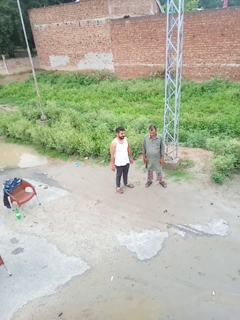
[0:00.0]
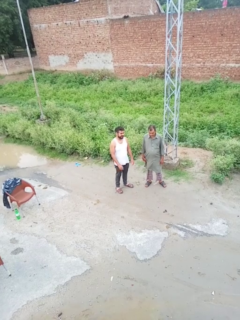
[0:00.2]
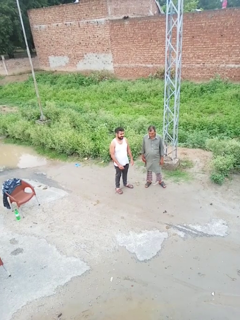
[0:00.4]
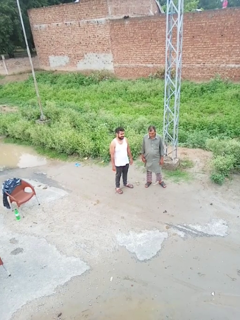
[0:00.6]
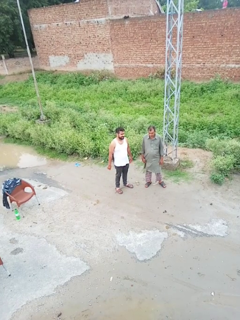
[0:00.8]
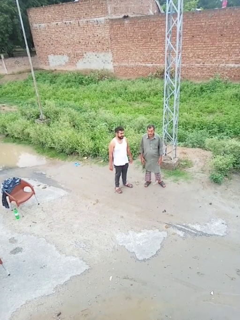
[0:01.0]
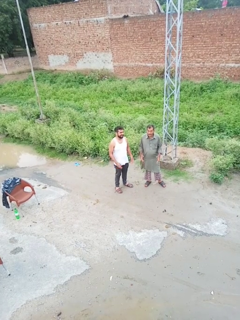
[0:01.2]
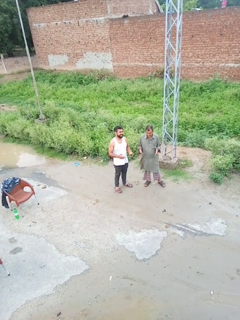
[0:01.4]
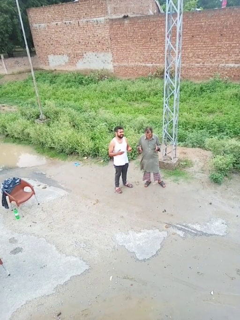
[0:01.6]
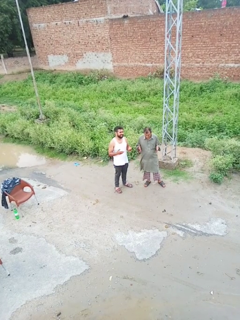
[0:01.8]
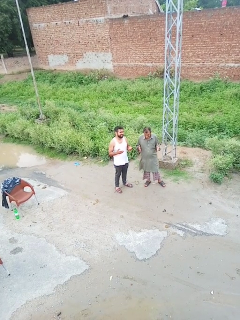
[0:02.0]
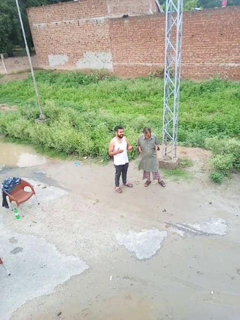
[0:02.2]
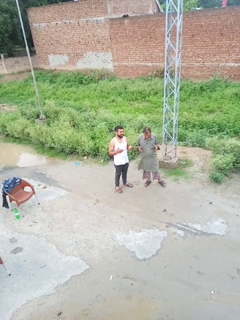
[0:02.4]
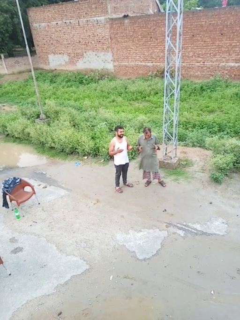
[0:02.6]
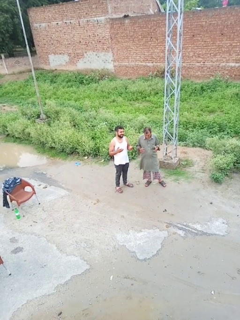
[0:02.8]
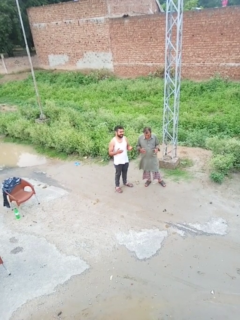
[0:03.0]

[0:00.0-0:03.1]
person laughs with person

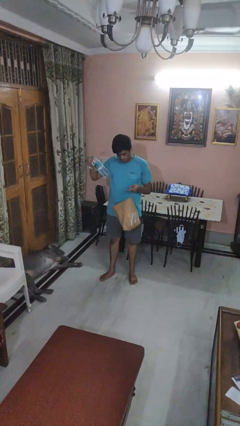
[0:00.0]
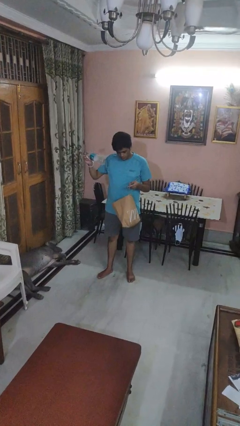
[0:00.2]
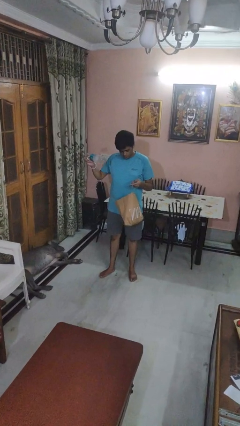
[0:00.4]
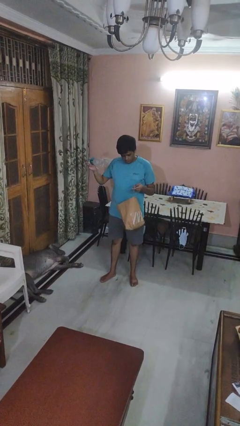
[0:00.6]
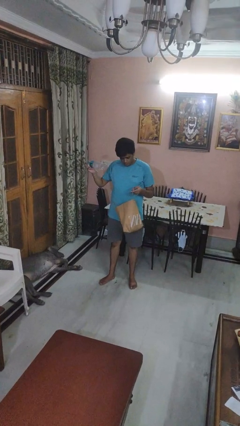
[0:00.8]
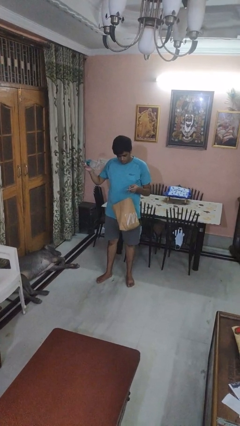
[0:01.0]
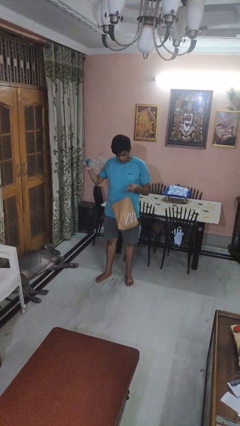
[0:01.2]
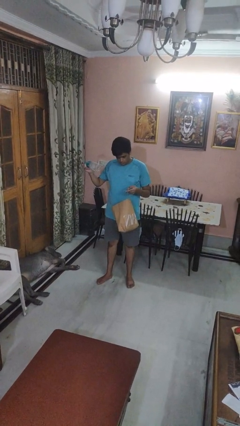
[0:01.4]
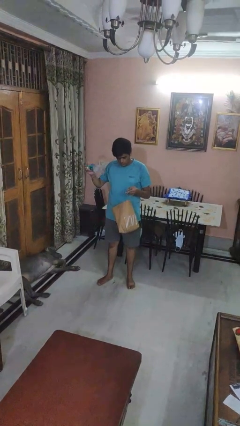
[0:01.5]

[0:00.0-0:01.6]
person takes object from bag

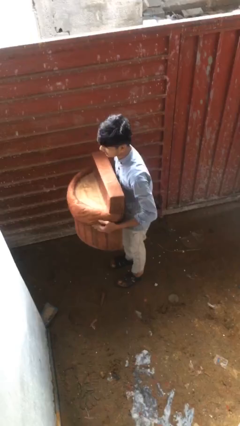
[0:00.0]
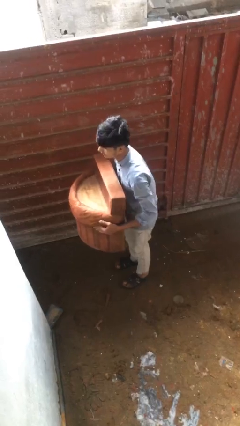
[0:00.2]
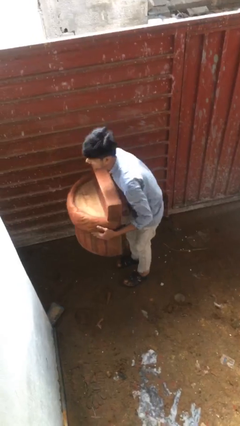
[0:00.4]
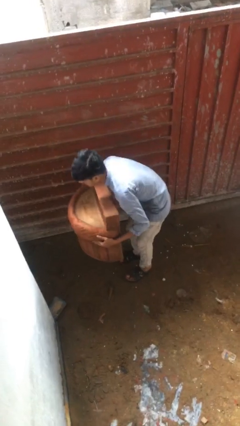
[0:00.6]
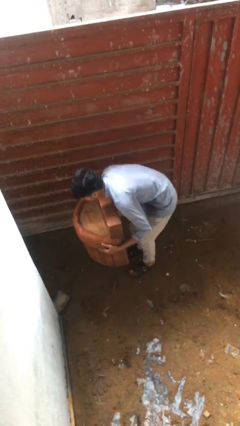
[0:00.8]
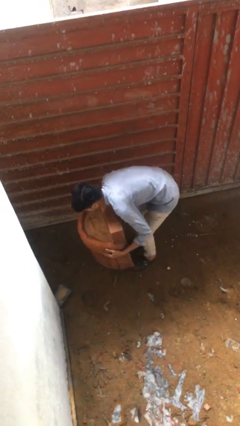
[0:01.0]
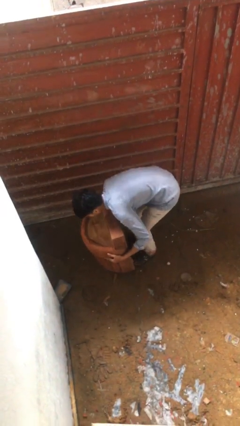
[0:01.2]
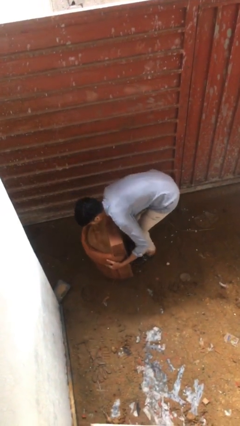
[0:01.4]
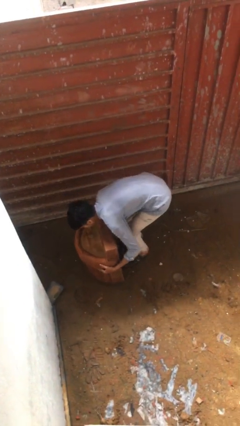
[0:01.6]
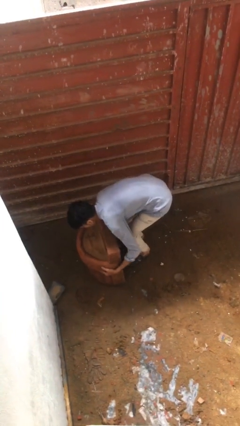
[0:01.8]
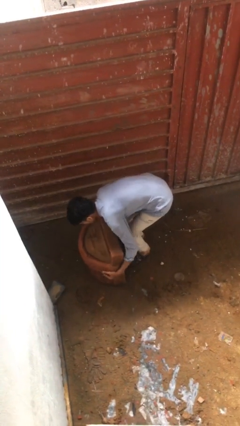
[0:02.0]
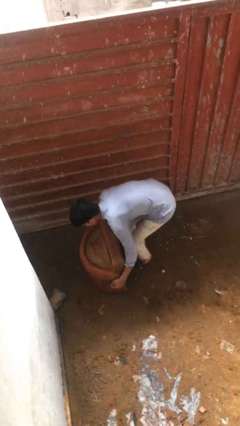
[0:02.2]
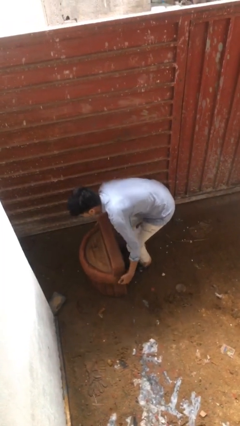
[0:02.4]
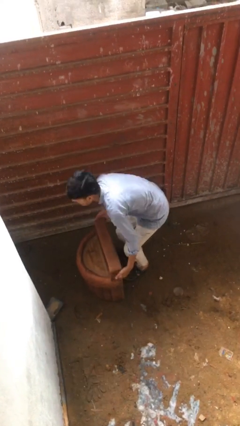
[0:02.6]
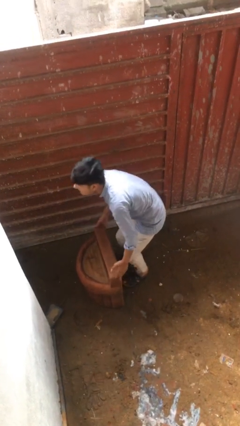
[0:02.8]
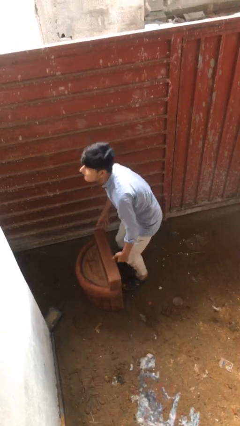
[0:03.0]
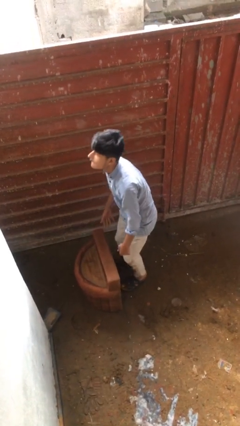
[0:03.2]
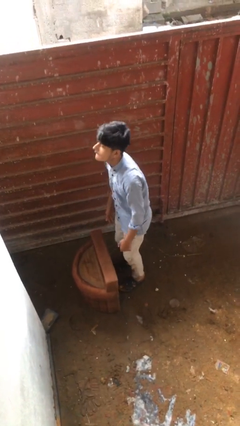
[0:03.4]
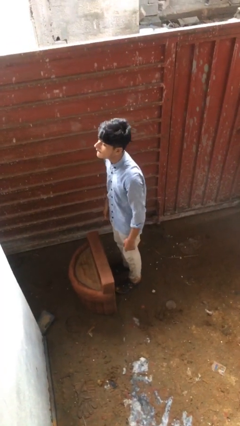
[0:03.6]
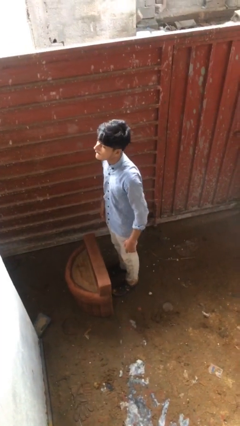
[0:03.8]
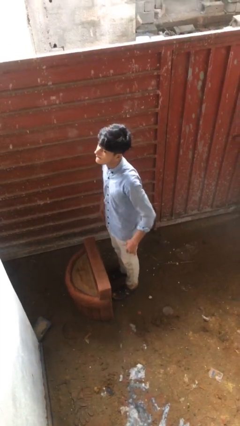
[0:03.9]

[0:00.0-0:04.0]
person puts down object on floor

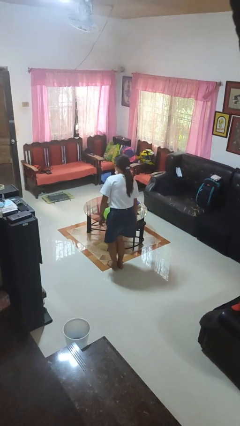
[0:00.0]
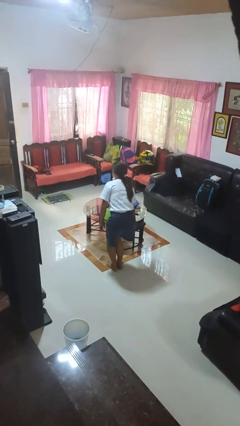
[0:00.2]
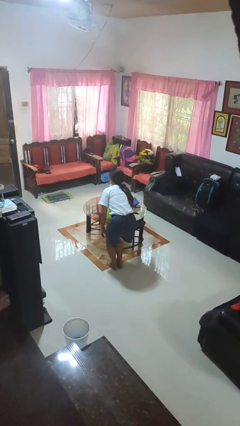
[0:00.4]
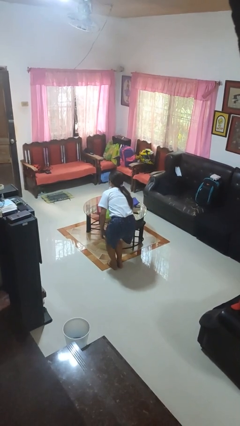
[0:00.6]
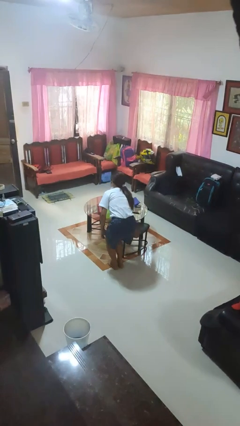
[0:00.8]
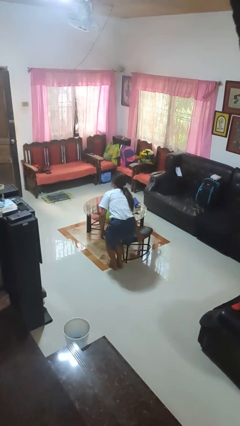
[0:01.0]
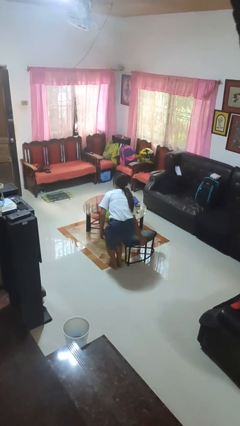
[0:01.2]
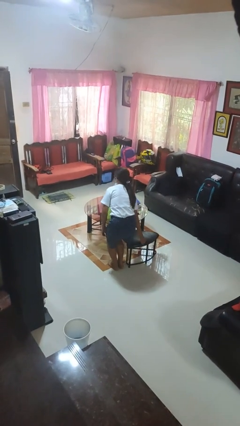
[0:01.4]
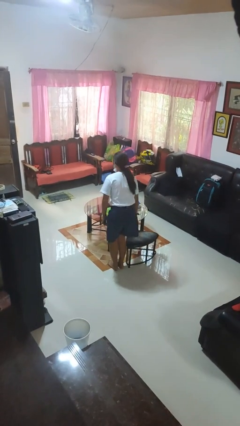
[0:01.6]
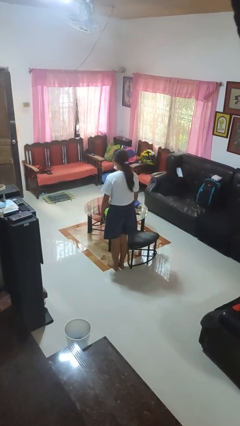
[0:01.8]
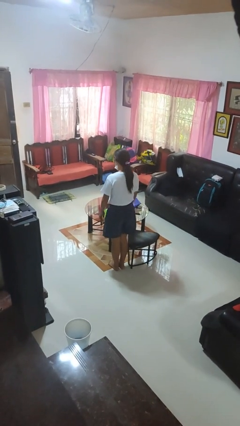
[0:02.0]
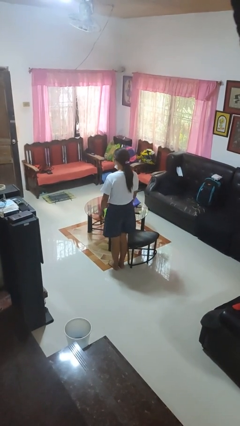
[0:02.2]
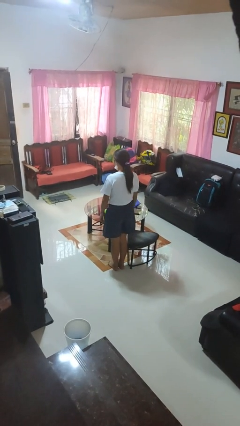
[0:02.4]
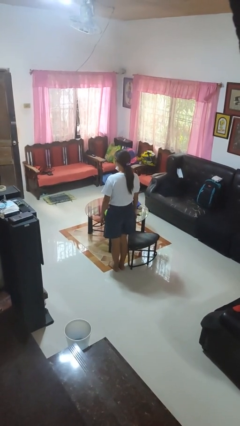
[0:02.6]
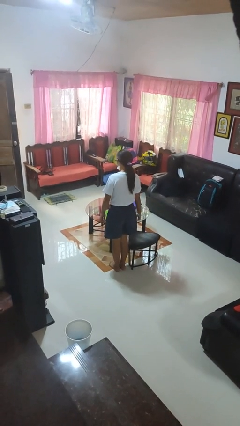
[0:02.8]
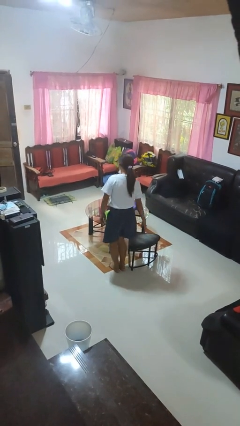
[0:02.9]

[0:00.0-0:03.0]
person pulls out chair

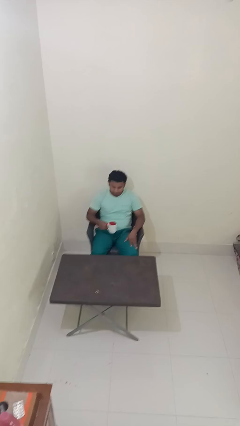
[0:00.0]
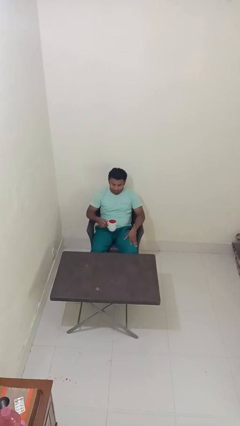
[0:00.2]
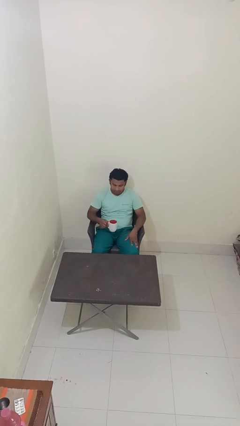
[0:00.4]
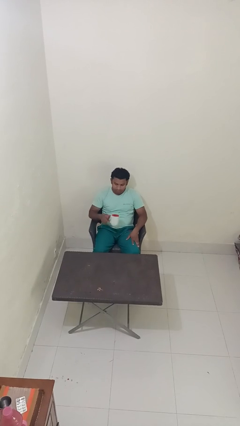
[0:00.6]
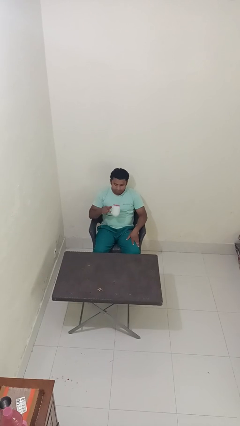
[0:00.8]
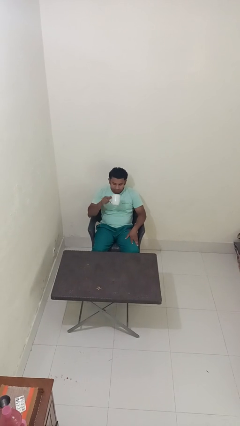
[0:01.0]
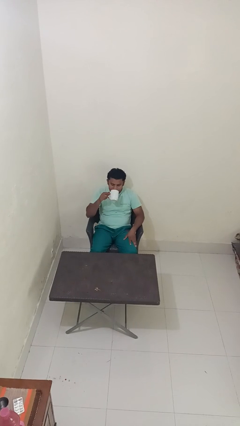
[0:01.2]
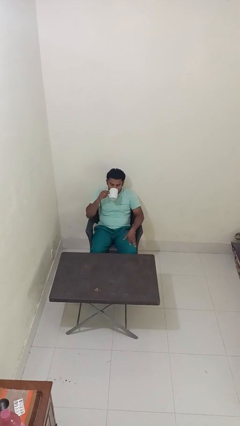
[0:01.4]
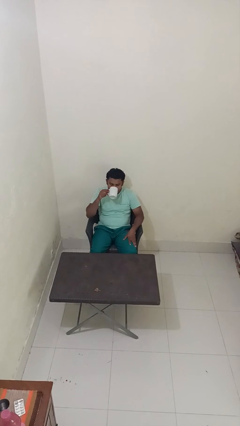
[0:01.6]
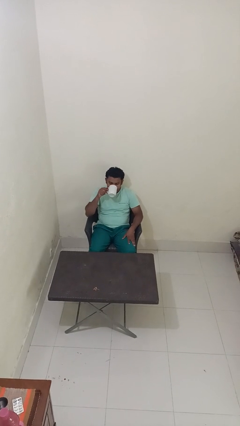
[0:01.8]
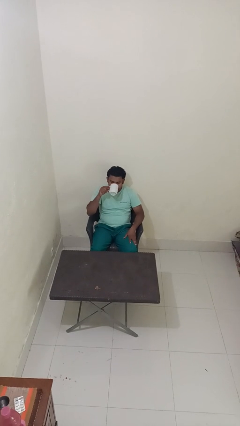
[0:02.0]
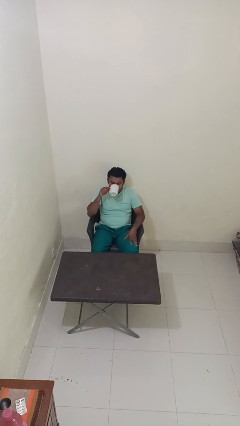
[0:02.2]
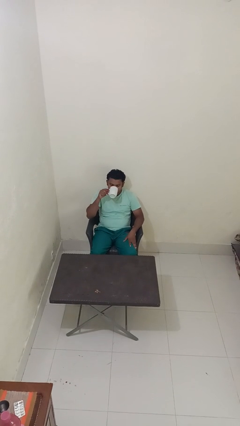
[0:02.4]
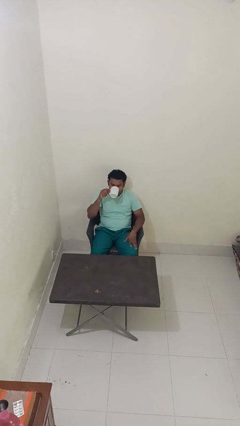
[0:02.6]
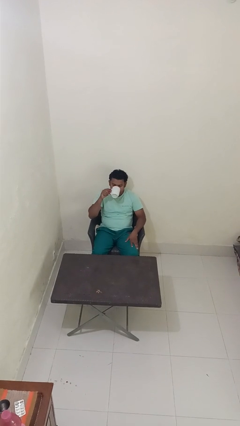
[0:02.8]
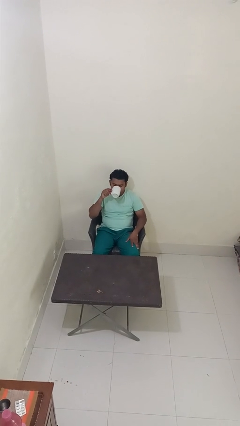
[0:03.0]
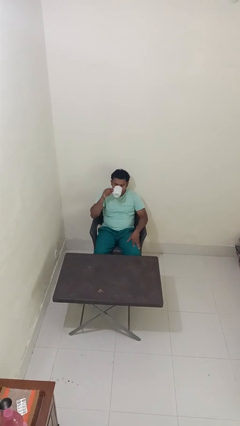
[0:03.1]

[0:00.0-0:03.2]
person drinks from mug

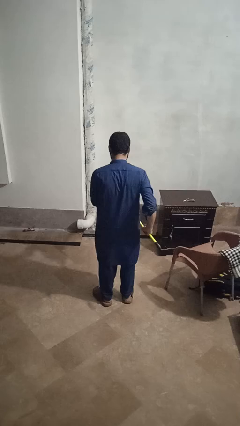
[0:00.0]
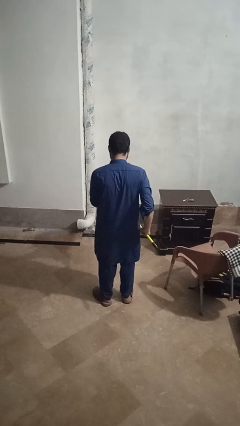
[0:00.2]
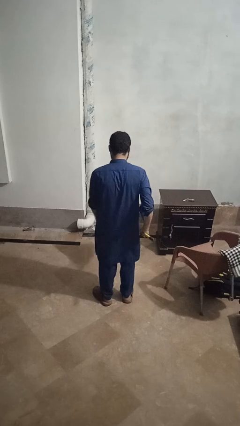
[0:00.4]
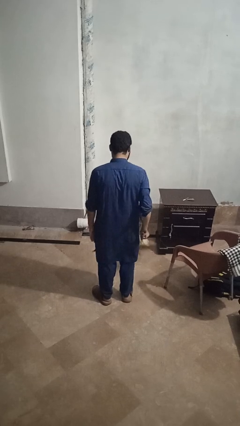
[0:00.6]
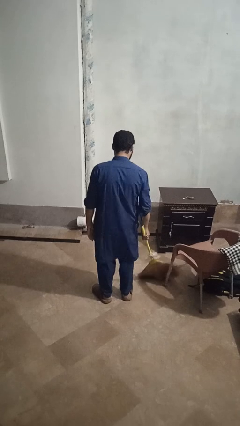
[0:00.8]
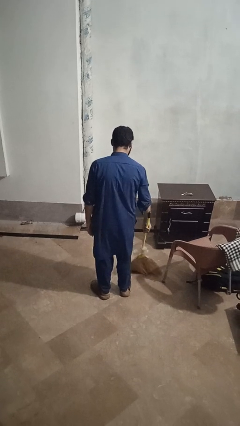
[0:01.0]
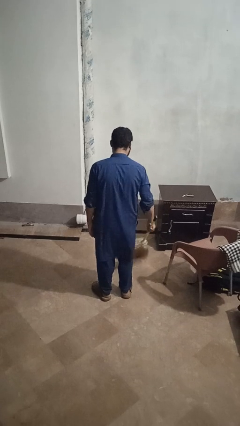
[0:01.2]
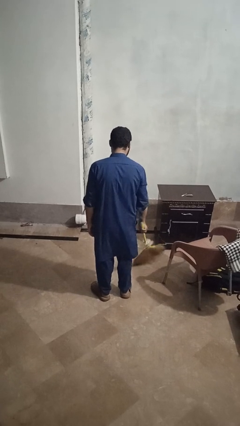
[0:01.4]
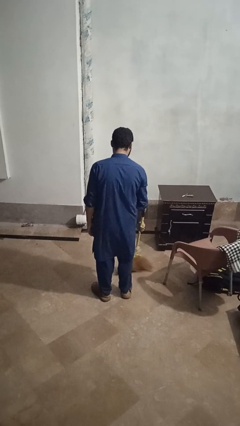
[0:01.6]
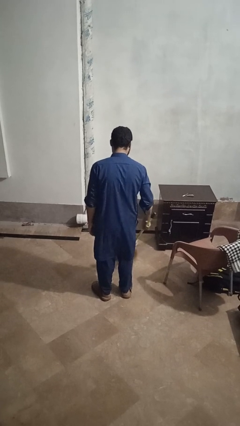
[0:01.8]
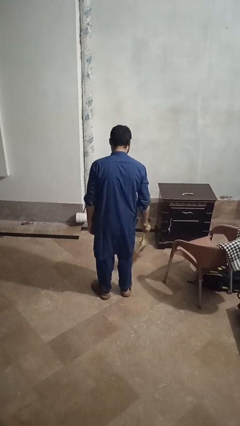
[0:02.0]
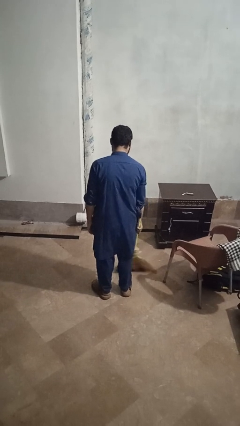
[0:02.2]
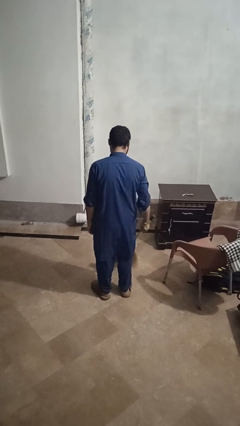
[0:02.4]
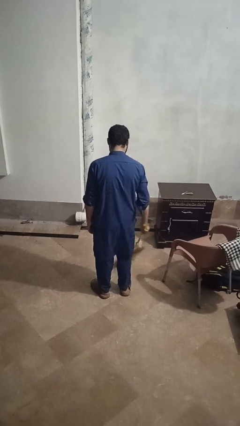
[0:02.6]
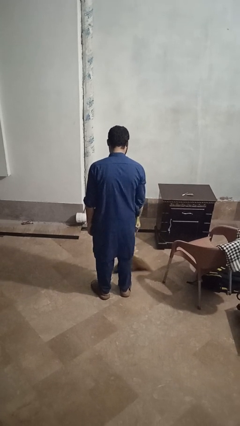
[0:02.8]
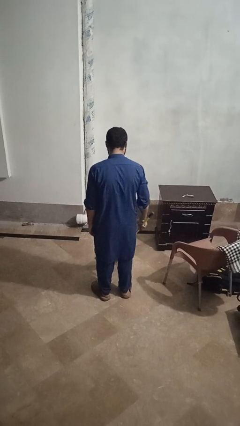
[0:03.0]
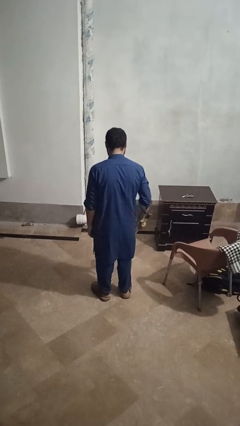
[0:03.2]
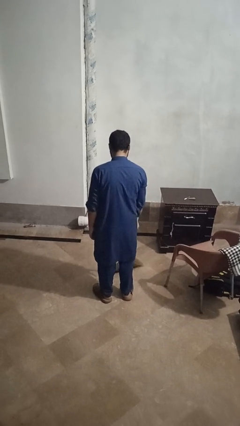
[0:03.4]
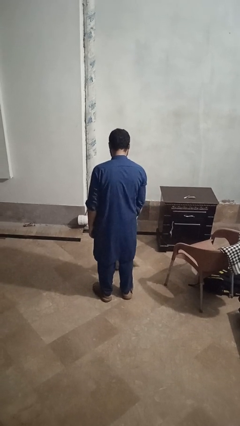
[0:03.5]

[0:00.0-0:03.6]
person mops
